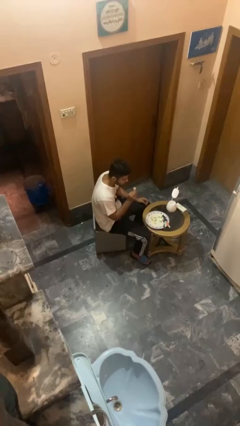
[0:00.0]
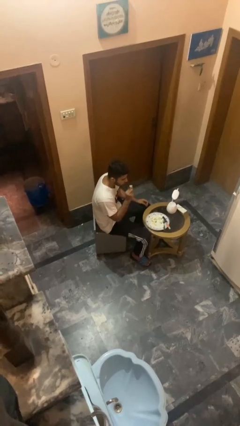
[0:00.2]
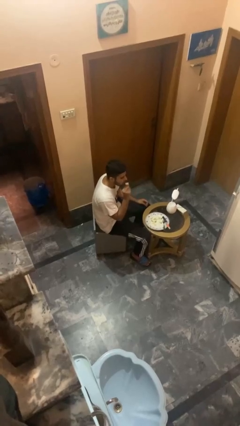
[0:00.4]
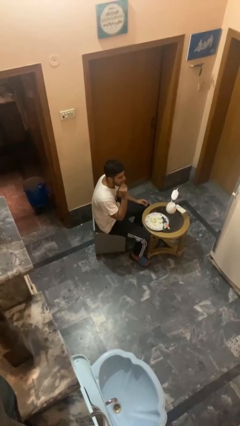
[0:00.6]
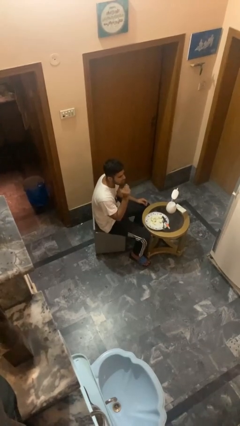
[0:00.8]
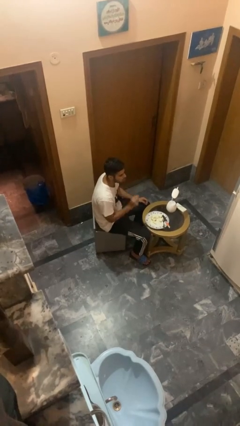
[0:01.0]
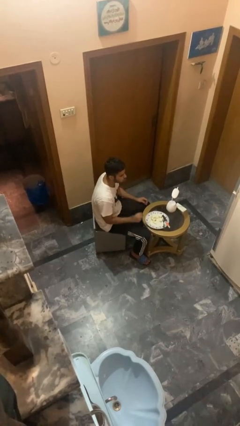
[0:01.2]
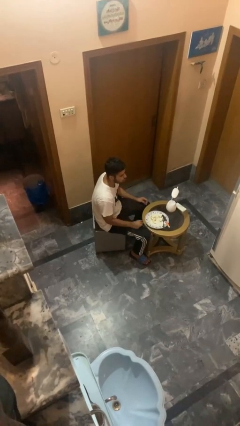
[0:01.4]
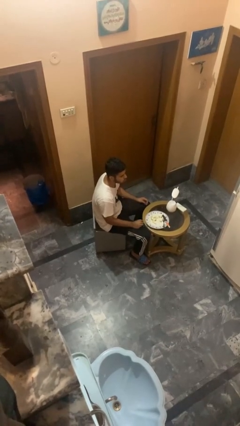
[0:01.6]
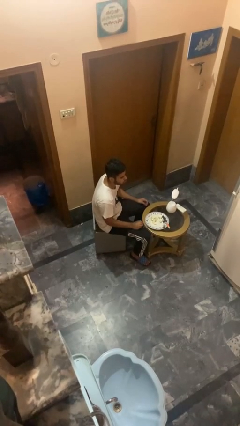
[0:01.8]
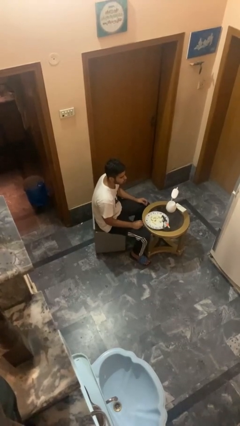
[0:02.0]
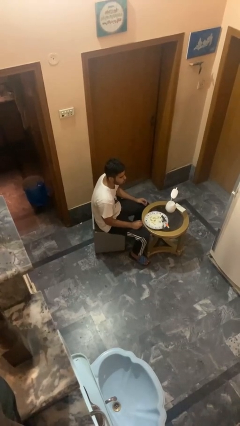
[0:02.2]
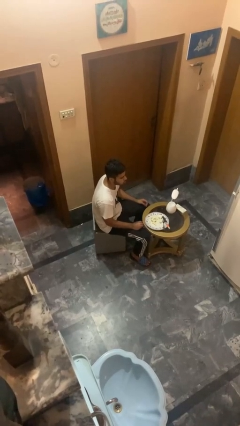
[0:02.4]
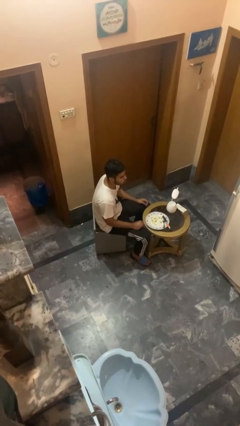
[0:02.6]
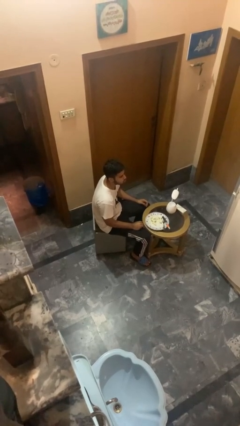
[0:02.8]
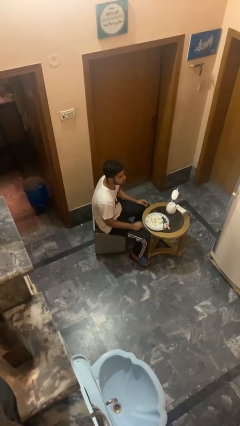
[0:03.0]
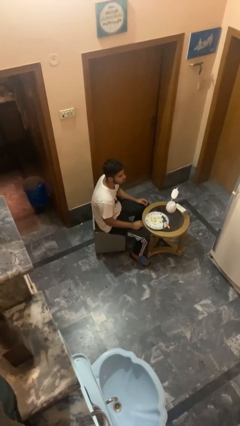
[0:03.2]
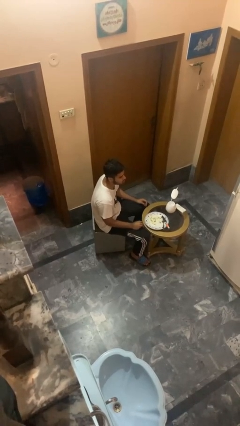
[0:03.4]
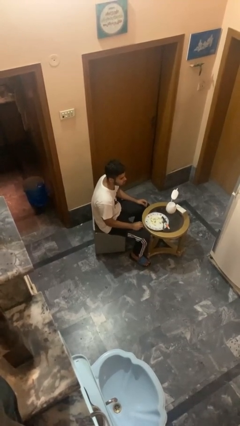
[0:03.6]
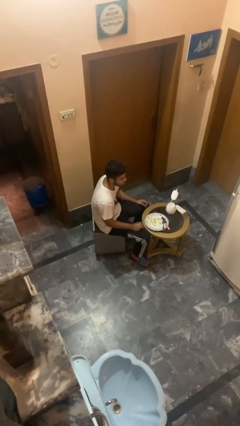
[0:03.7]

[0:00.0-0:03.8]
person eats with hands

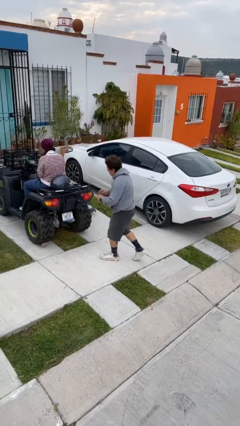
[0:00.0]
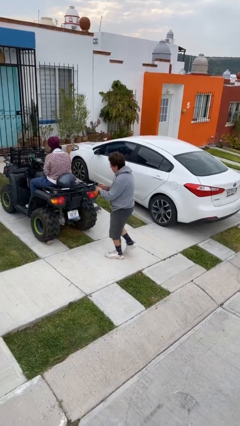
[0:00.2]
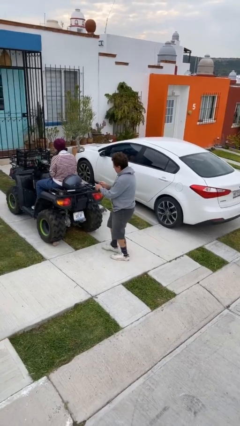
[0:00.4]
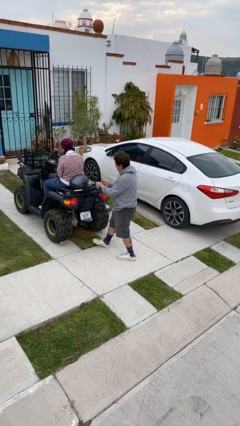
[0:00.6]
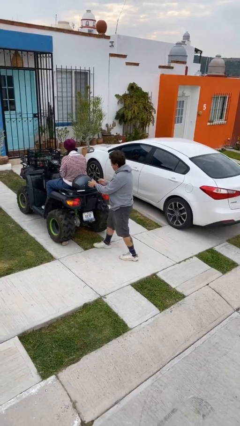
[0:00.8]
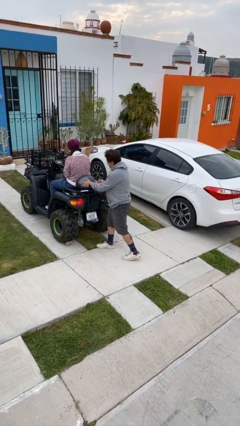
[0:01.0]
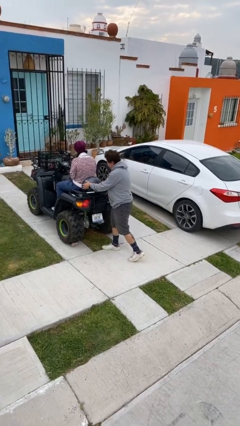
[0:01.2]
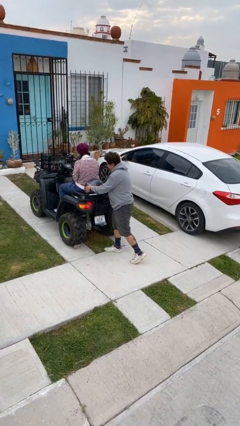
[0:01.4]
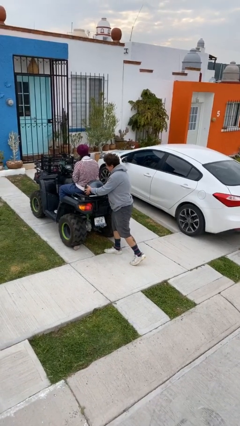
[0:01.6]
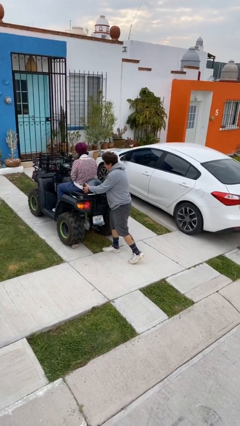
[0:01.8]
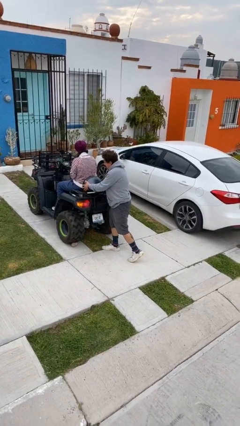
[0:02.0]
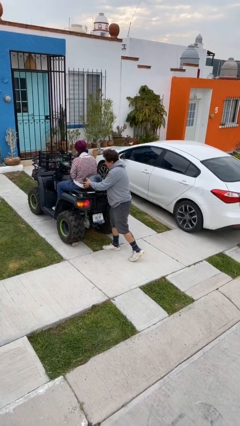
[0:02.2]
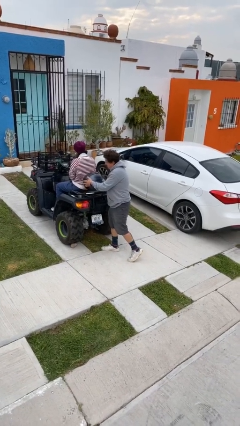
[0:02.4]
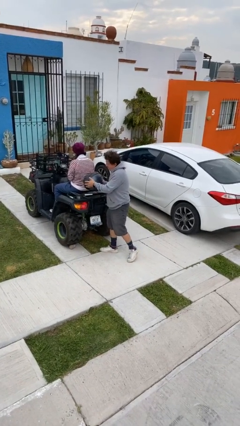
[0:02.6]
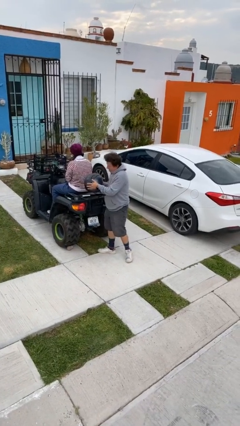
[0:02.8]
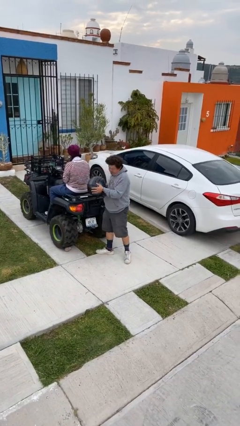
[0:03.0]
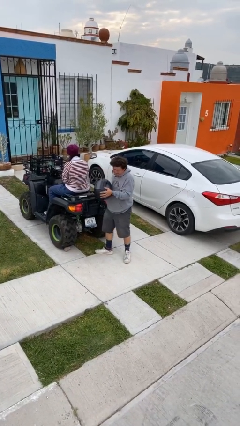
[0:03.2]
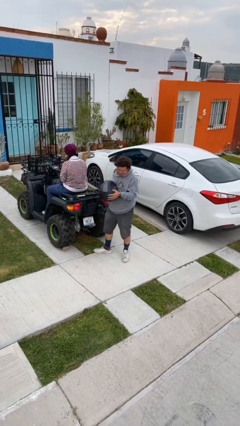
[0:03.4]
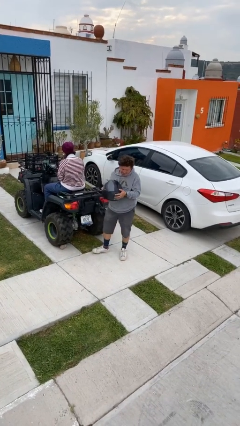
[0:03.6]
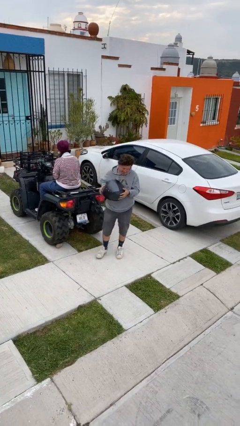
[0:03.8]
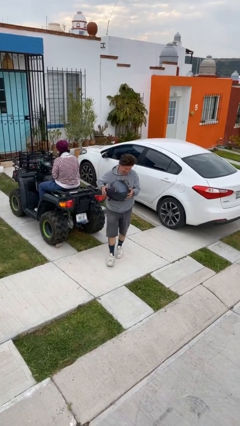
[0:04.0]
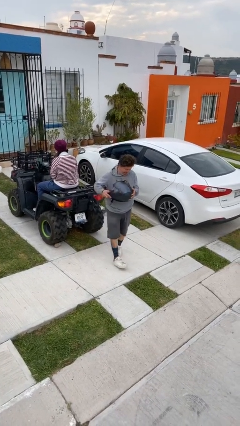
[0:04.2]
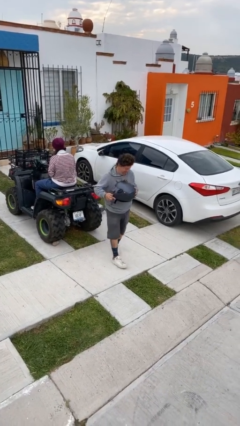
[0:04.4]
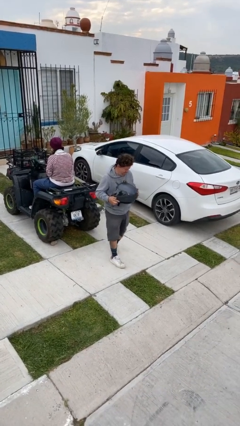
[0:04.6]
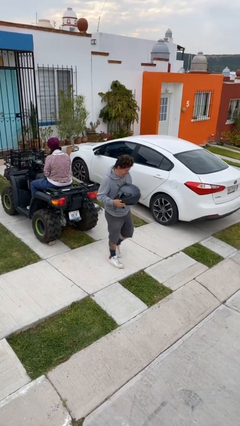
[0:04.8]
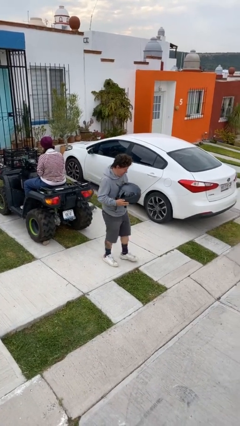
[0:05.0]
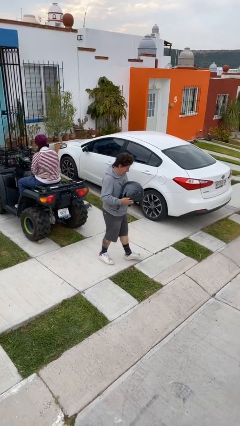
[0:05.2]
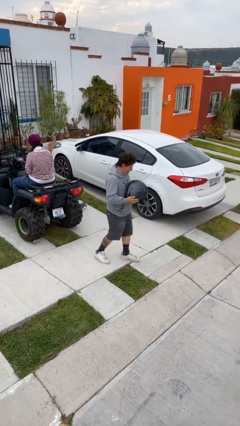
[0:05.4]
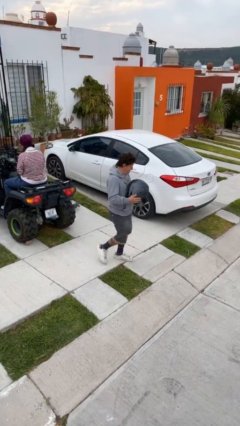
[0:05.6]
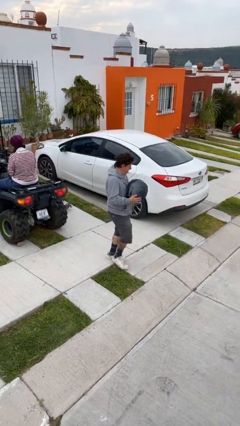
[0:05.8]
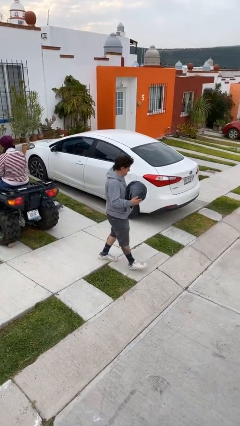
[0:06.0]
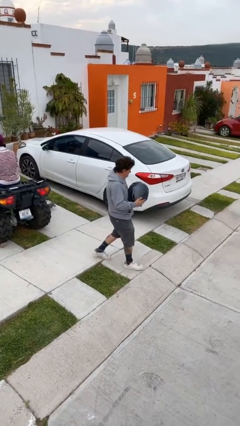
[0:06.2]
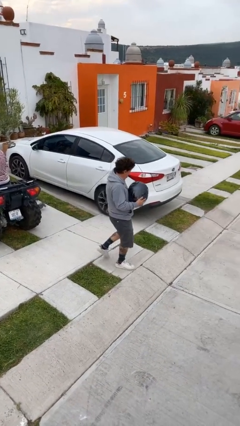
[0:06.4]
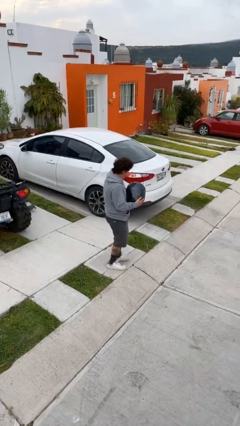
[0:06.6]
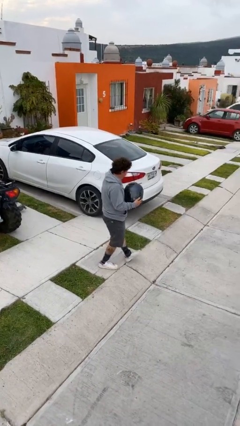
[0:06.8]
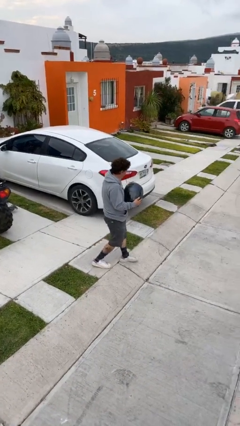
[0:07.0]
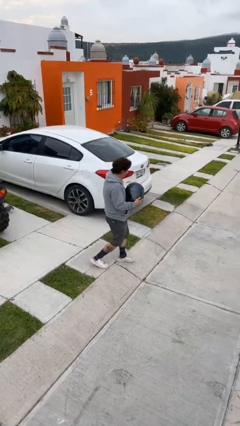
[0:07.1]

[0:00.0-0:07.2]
person steals object from person

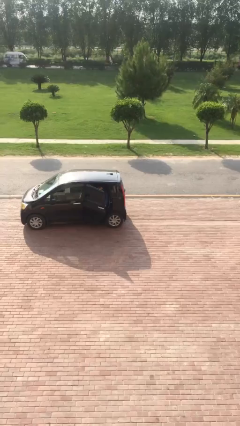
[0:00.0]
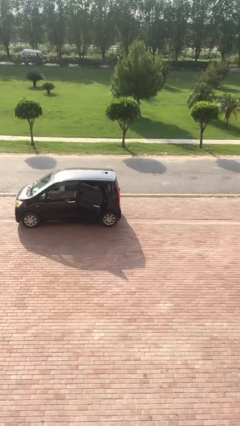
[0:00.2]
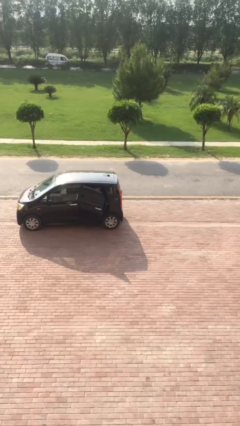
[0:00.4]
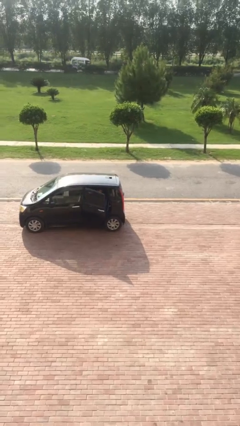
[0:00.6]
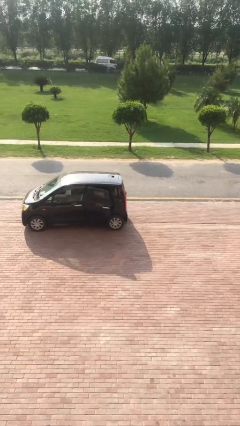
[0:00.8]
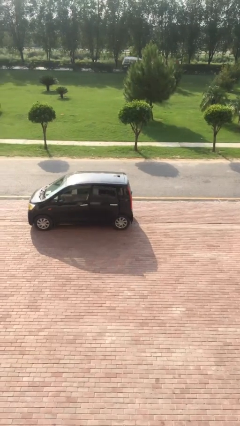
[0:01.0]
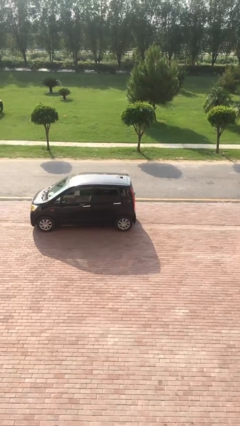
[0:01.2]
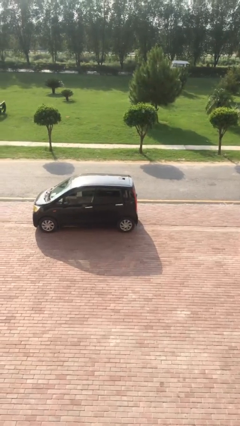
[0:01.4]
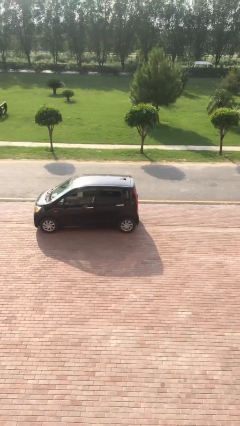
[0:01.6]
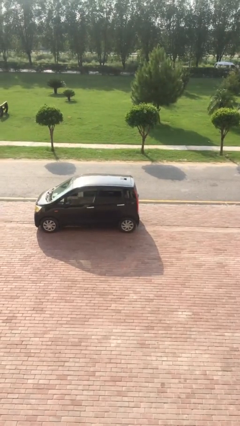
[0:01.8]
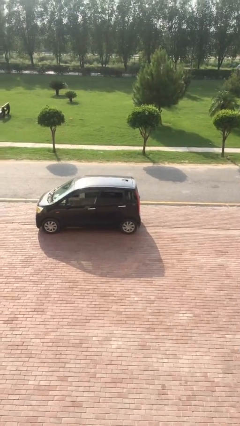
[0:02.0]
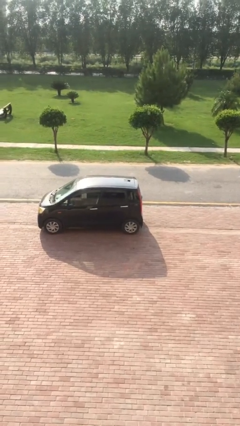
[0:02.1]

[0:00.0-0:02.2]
person closes car door

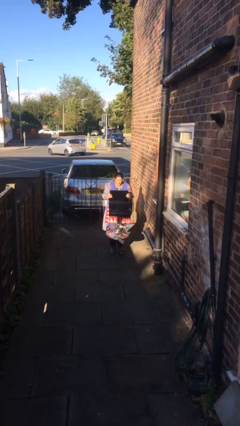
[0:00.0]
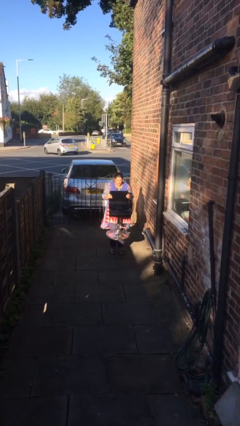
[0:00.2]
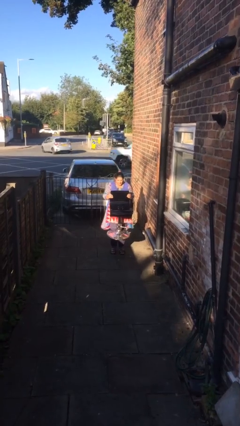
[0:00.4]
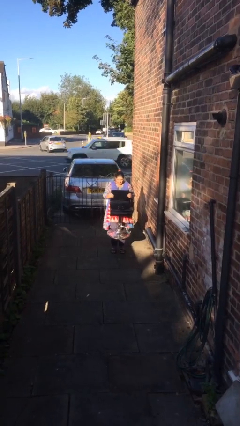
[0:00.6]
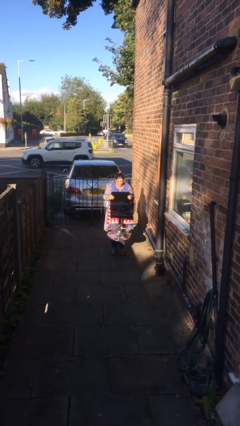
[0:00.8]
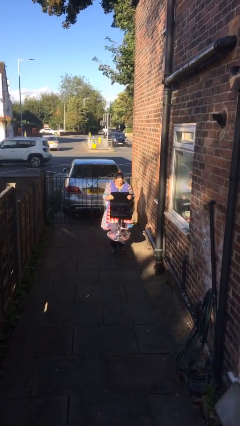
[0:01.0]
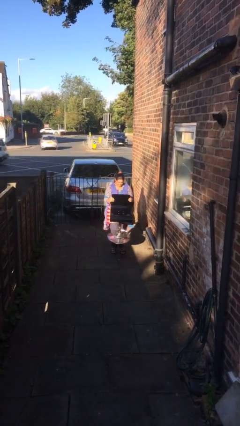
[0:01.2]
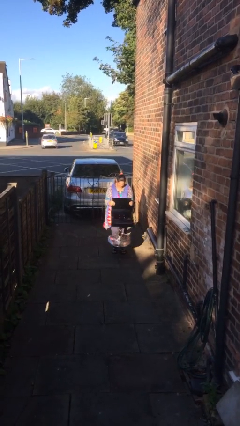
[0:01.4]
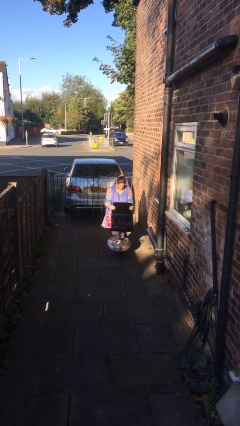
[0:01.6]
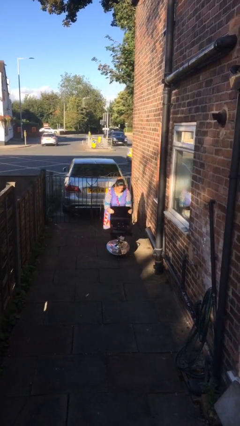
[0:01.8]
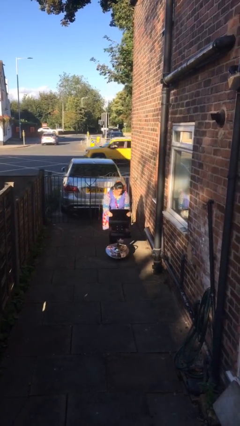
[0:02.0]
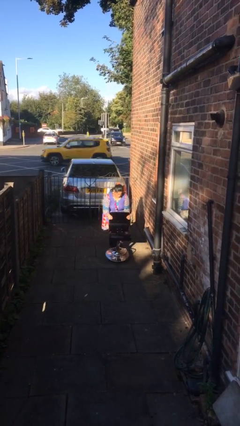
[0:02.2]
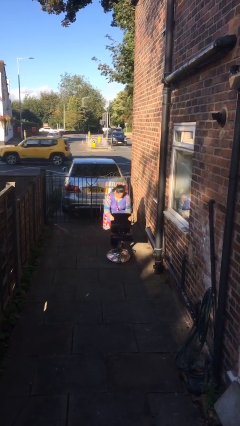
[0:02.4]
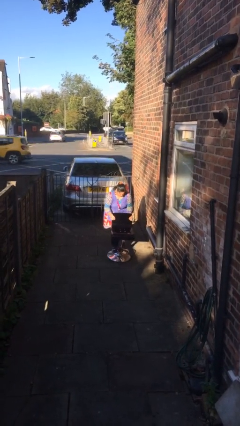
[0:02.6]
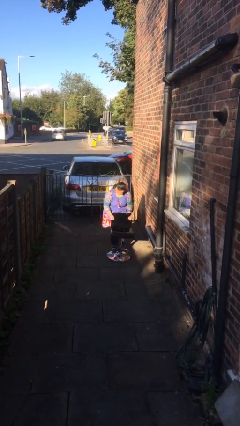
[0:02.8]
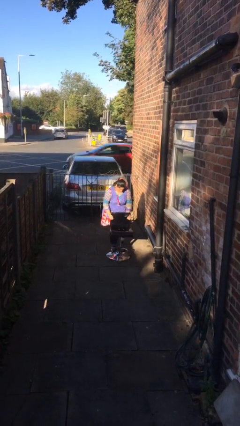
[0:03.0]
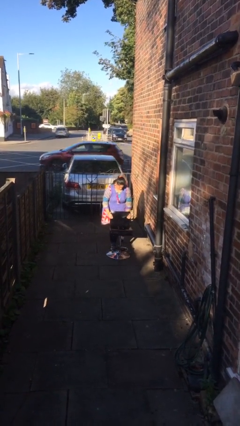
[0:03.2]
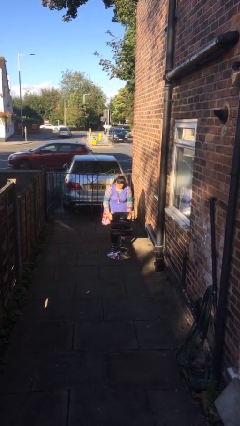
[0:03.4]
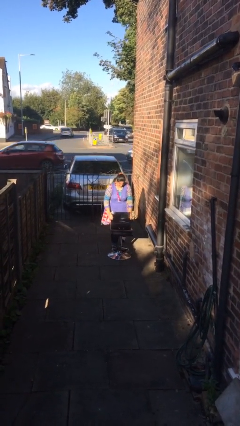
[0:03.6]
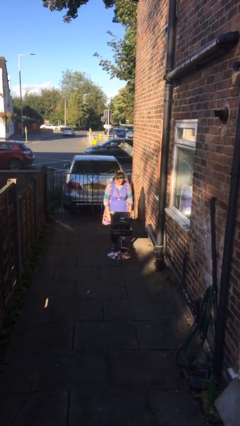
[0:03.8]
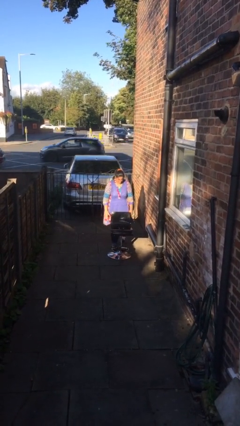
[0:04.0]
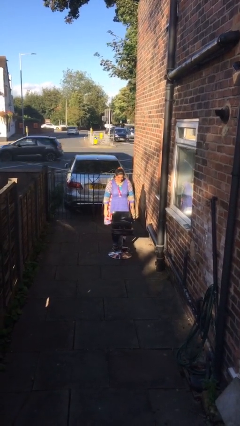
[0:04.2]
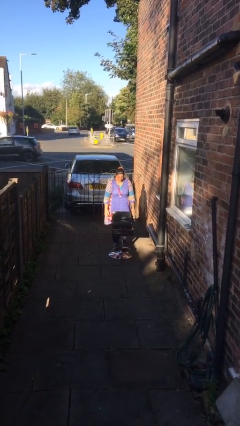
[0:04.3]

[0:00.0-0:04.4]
person puts down object on floor
